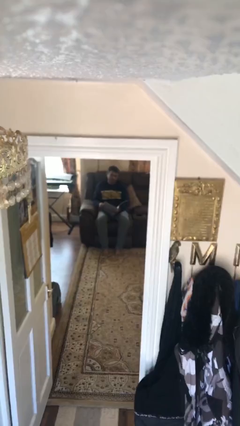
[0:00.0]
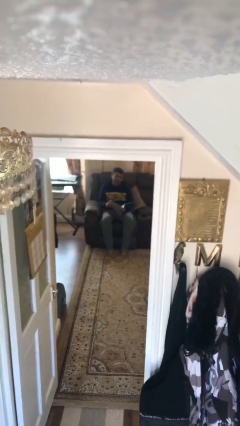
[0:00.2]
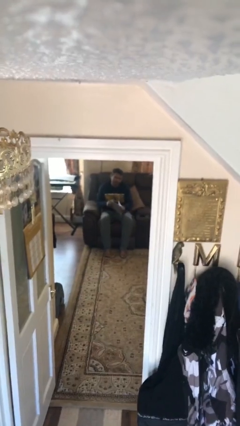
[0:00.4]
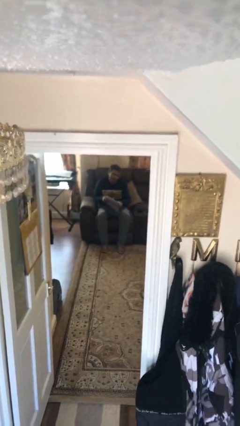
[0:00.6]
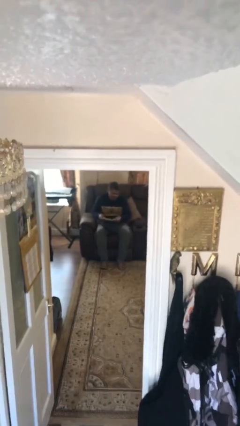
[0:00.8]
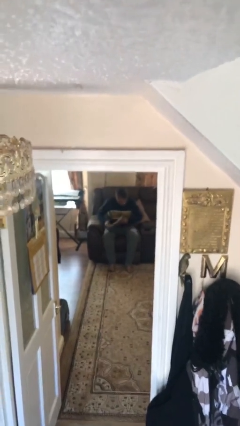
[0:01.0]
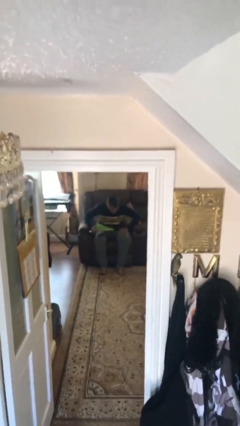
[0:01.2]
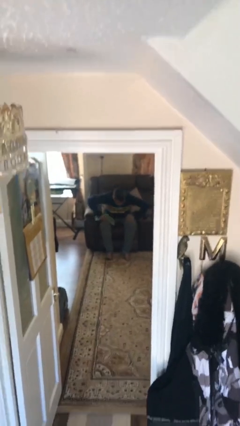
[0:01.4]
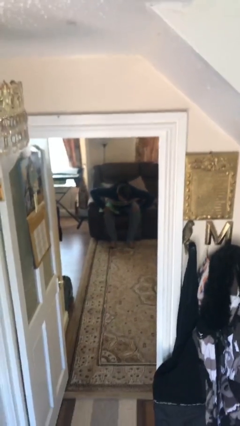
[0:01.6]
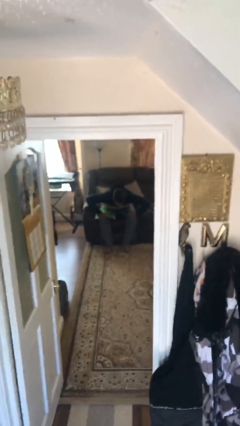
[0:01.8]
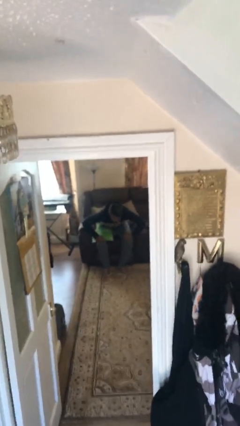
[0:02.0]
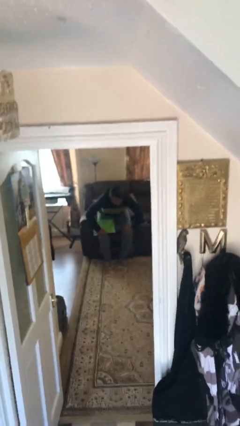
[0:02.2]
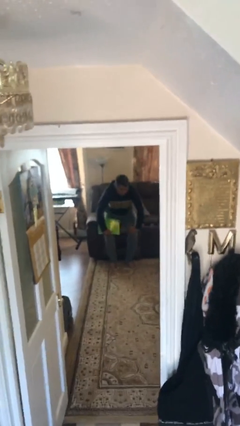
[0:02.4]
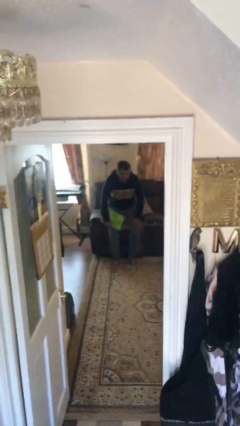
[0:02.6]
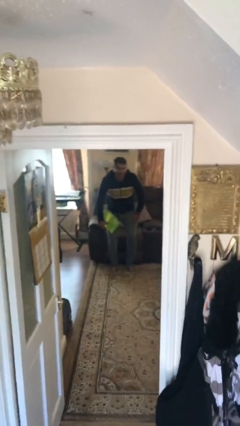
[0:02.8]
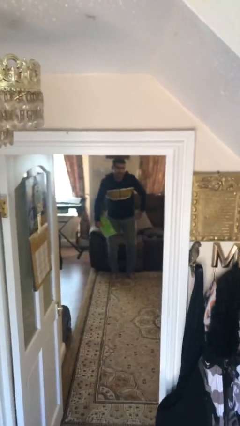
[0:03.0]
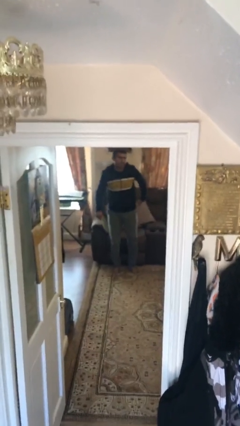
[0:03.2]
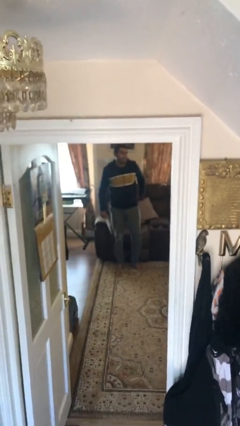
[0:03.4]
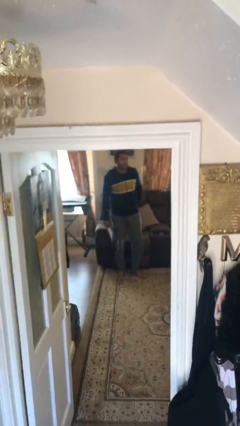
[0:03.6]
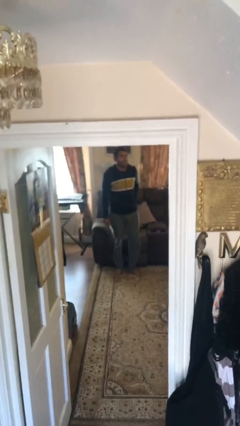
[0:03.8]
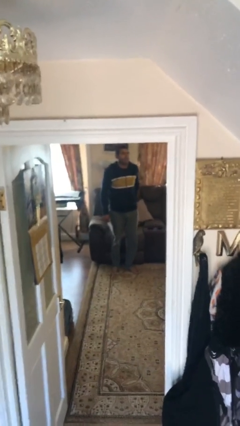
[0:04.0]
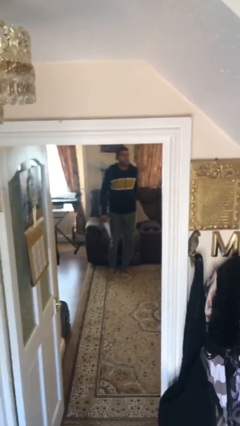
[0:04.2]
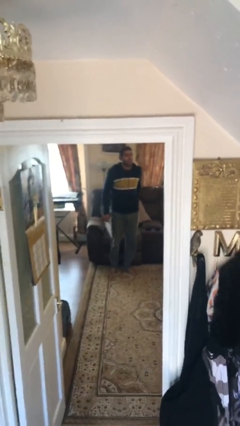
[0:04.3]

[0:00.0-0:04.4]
person stands up

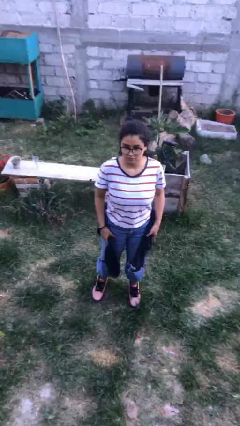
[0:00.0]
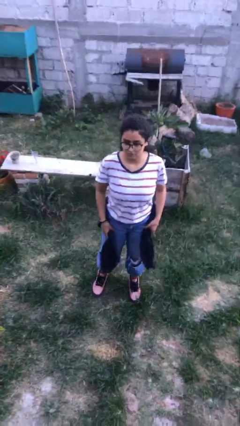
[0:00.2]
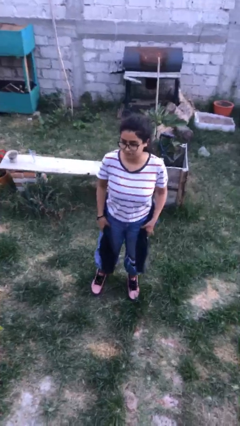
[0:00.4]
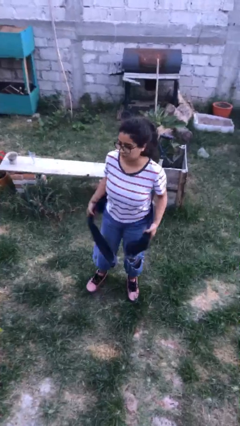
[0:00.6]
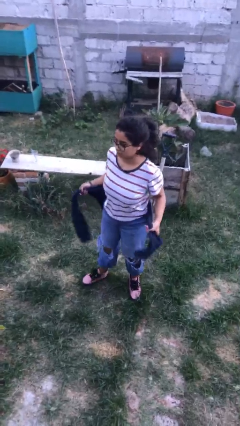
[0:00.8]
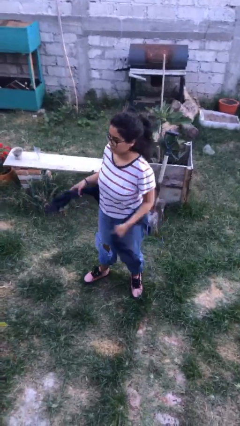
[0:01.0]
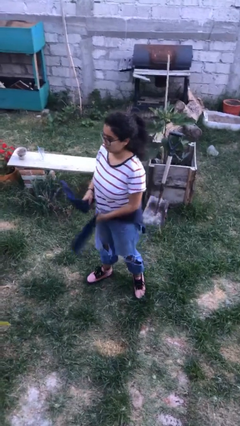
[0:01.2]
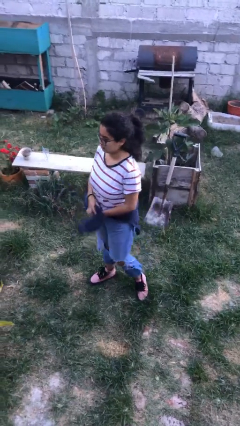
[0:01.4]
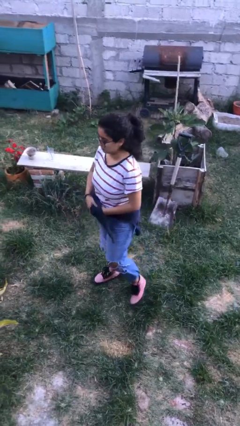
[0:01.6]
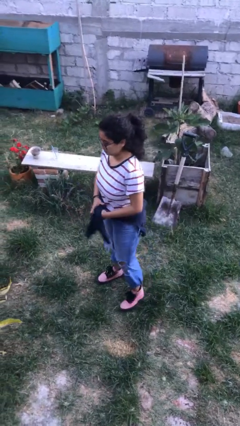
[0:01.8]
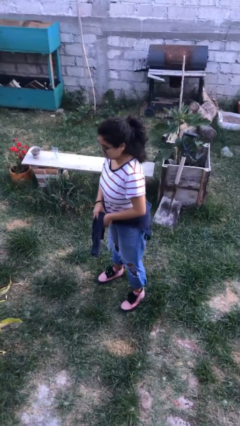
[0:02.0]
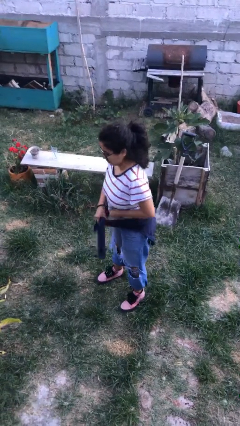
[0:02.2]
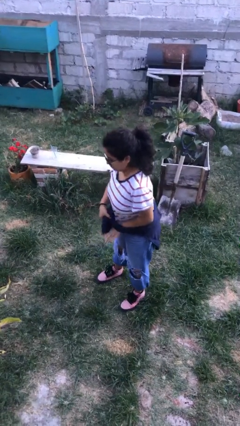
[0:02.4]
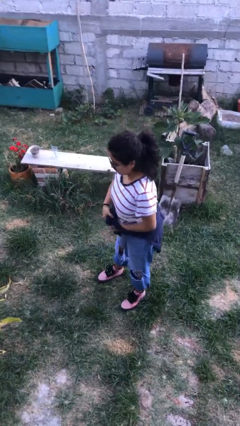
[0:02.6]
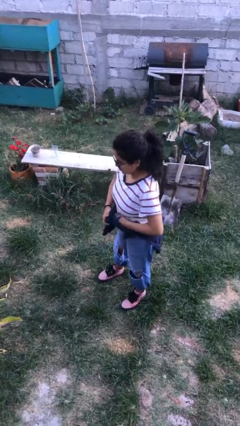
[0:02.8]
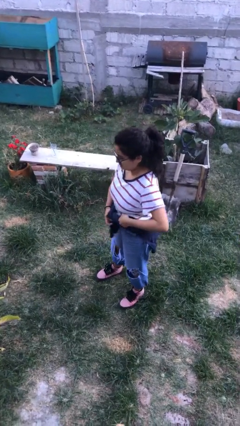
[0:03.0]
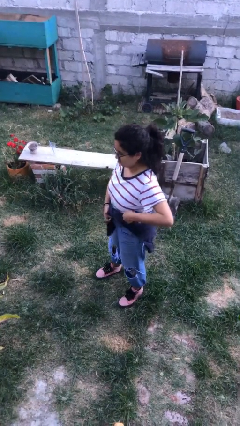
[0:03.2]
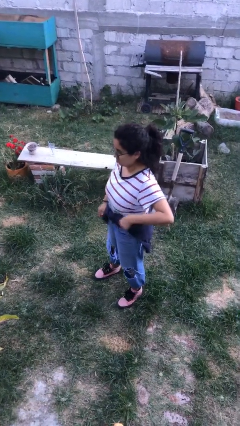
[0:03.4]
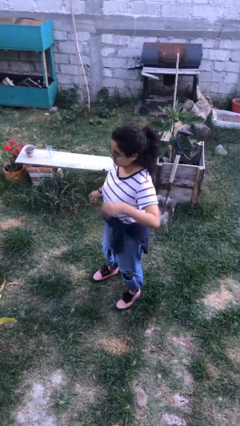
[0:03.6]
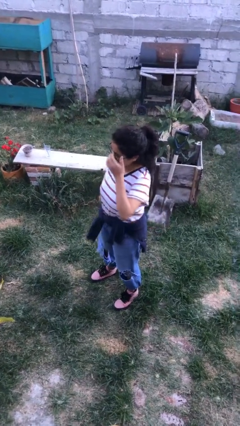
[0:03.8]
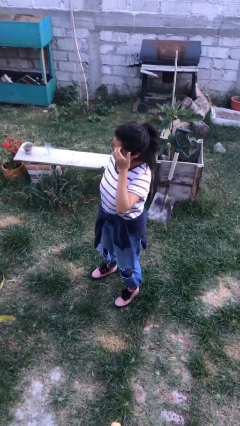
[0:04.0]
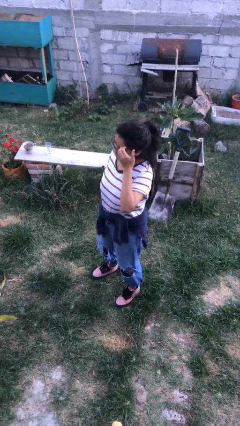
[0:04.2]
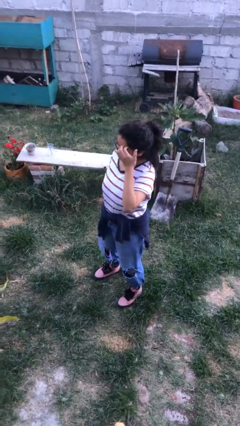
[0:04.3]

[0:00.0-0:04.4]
person ties jacket around waist

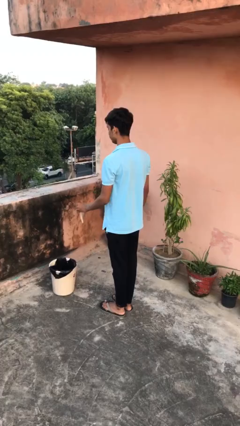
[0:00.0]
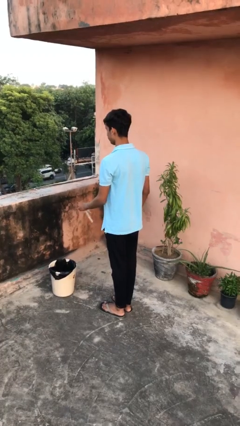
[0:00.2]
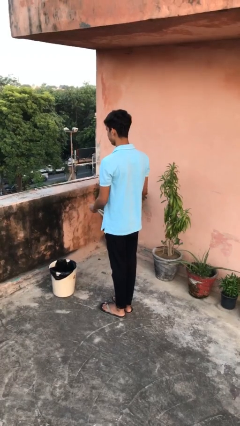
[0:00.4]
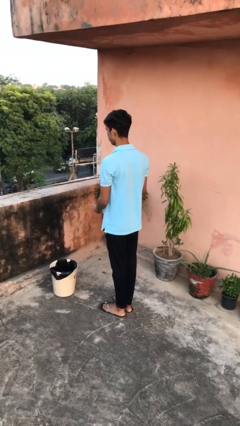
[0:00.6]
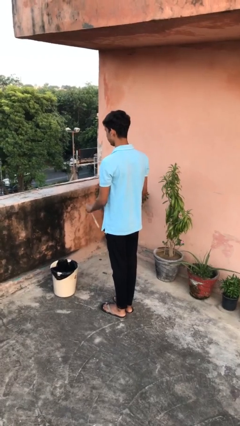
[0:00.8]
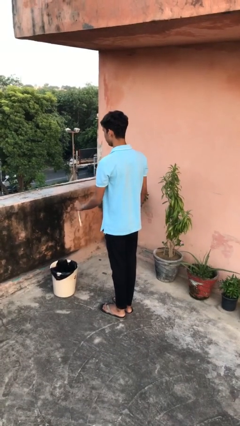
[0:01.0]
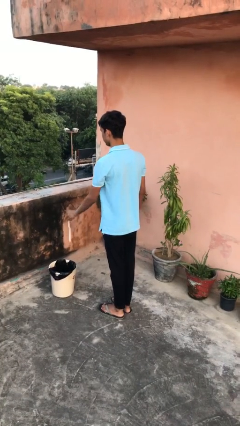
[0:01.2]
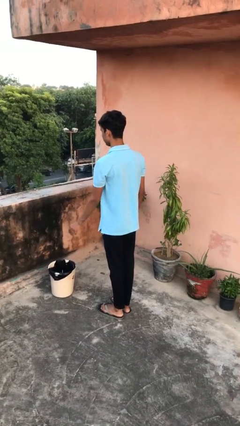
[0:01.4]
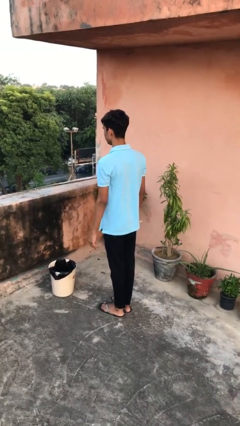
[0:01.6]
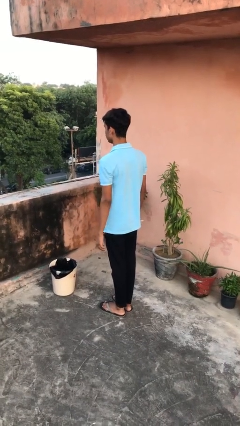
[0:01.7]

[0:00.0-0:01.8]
person discards trash

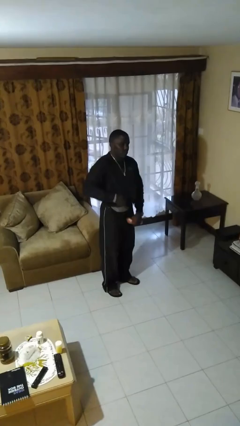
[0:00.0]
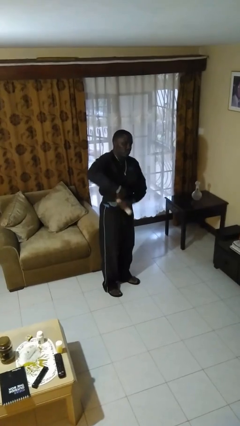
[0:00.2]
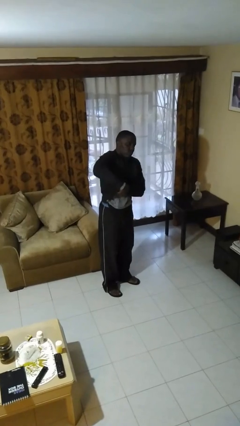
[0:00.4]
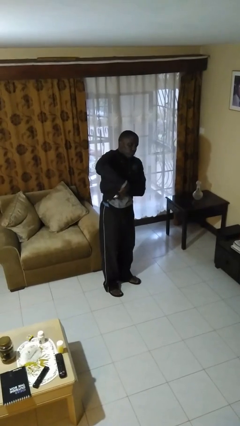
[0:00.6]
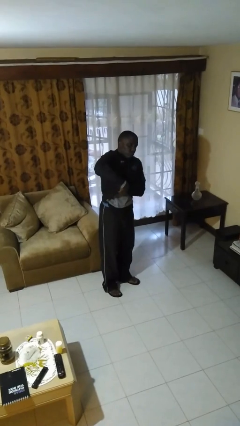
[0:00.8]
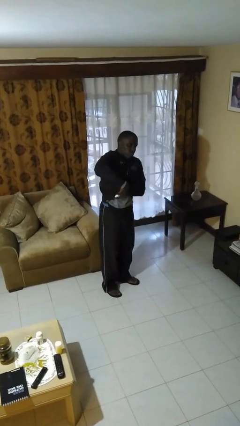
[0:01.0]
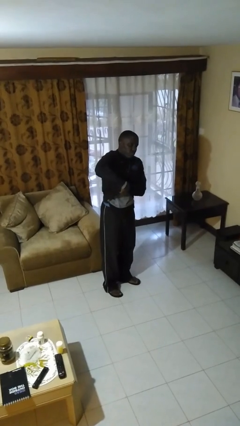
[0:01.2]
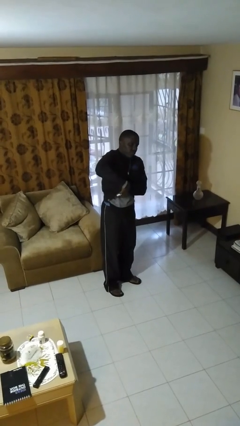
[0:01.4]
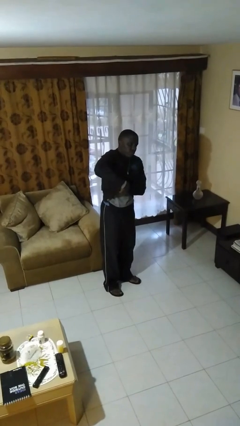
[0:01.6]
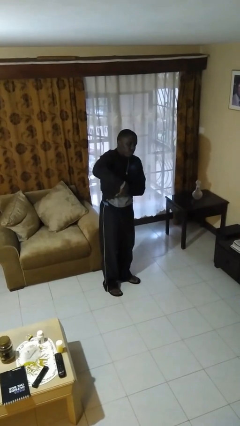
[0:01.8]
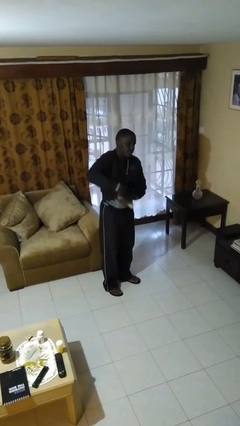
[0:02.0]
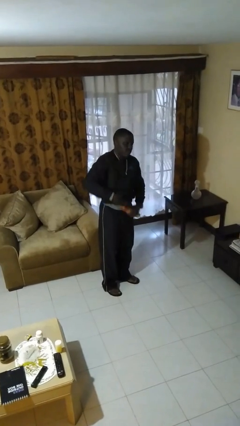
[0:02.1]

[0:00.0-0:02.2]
person applies deodorant

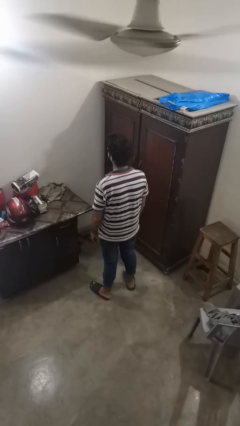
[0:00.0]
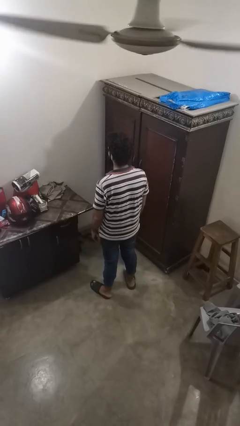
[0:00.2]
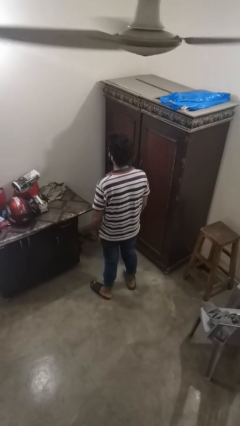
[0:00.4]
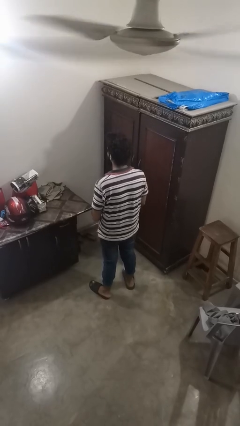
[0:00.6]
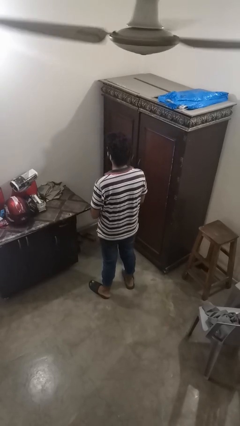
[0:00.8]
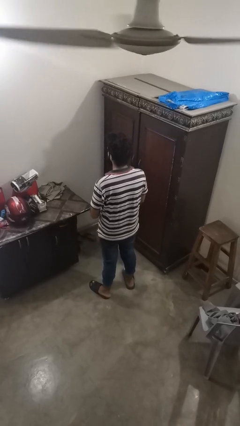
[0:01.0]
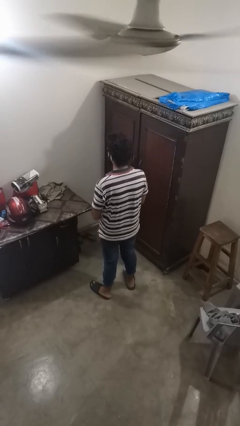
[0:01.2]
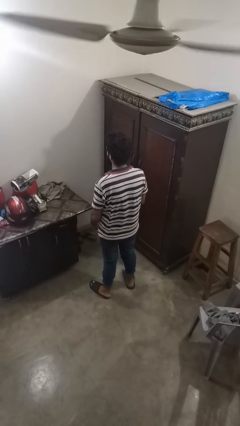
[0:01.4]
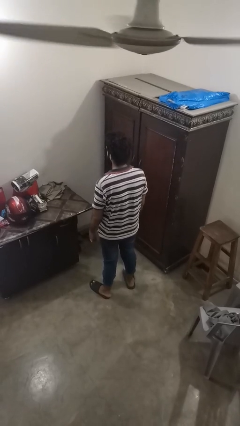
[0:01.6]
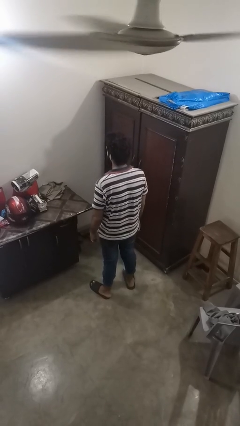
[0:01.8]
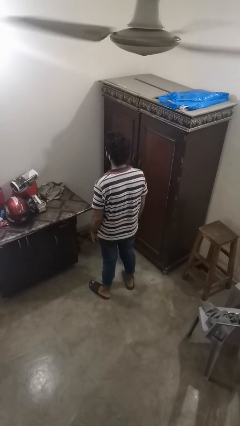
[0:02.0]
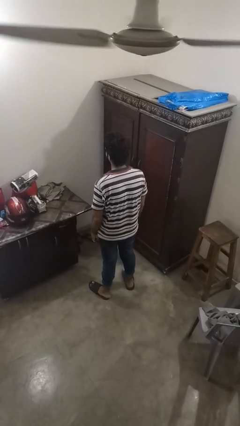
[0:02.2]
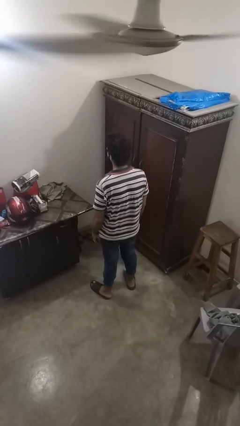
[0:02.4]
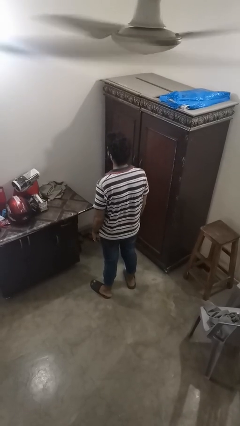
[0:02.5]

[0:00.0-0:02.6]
person puts on ring

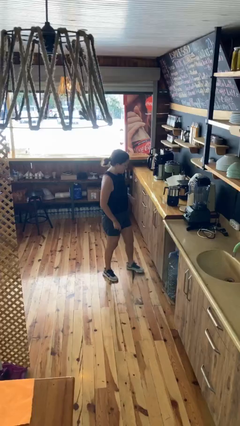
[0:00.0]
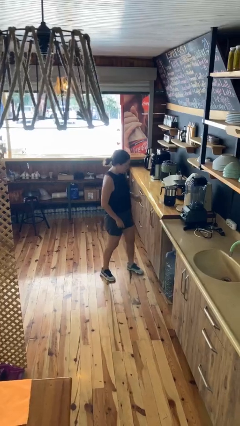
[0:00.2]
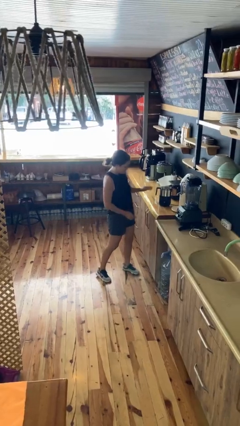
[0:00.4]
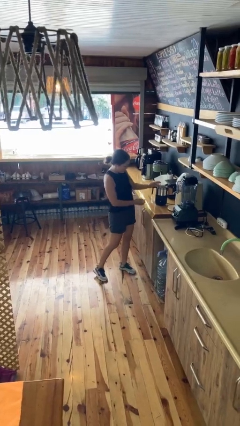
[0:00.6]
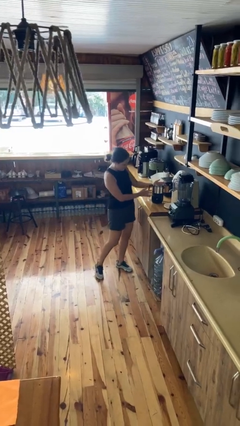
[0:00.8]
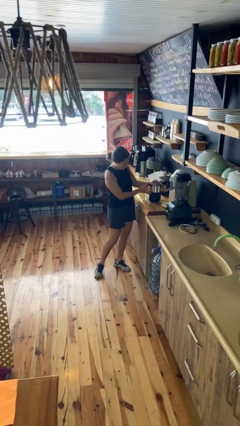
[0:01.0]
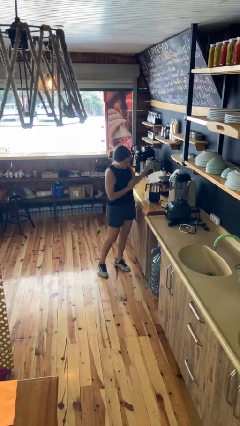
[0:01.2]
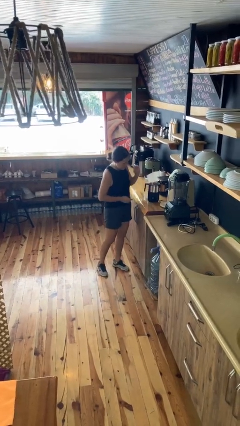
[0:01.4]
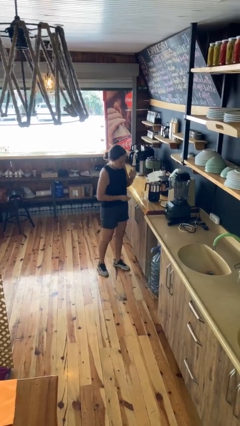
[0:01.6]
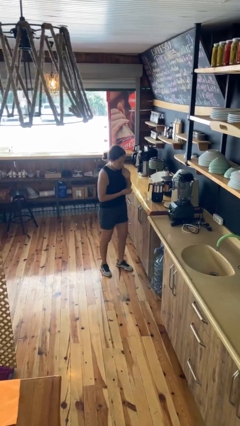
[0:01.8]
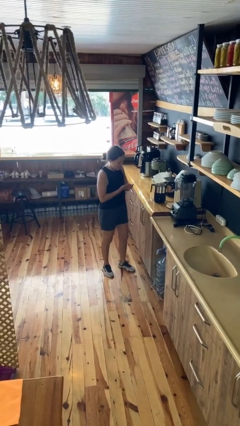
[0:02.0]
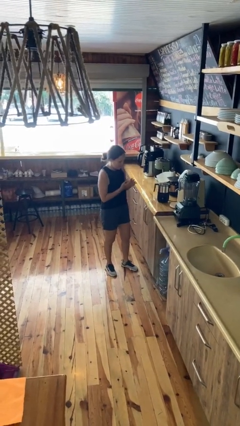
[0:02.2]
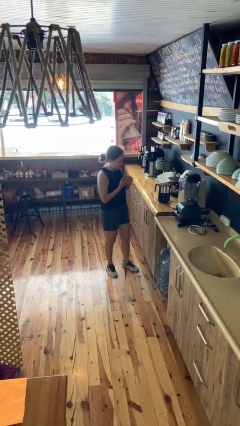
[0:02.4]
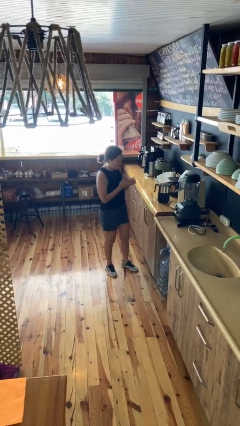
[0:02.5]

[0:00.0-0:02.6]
person burns hand
